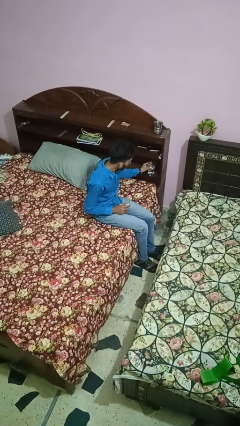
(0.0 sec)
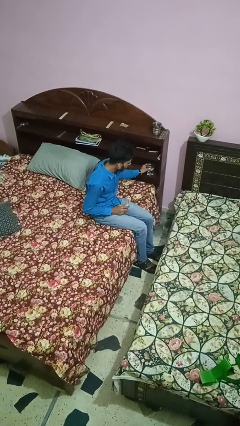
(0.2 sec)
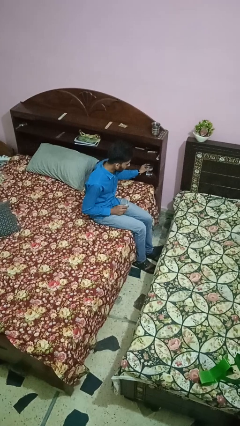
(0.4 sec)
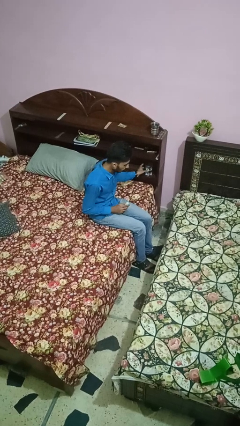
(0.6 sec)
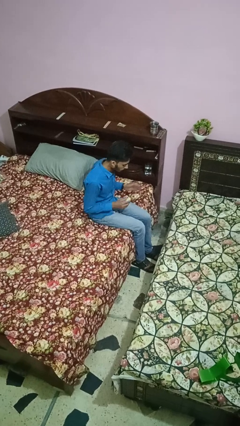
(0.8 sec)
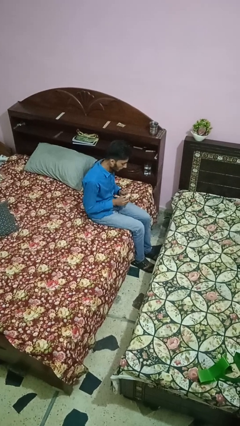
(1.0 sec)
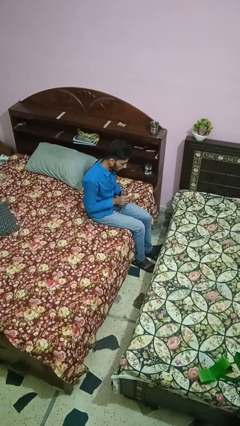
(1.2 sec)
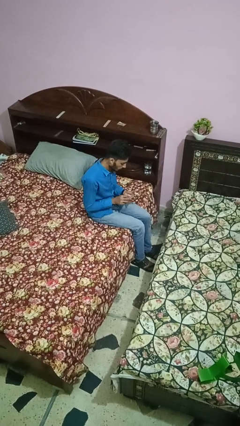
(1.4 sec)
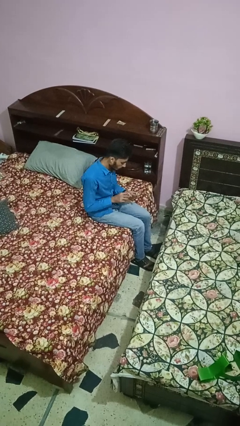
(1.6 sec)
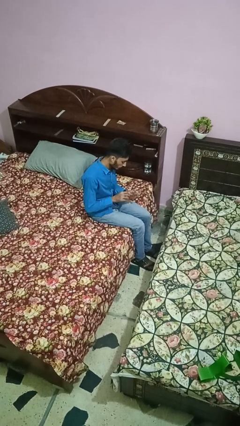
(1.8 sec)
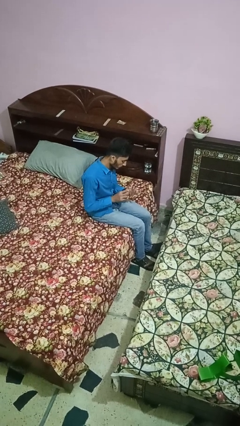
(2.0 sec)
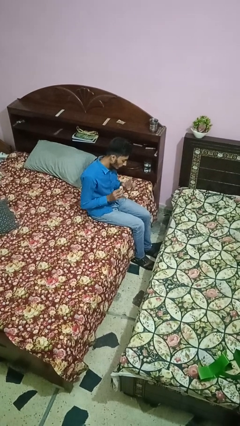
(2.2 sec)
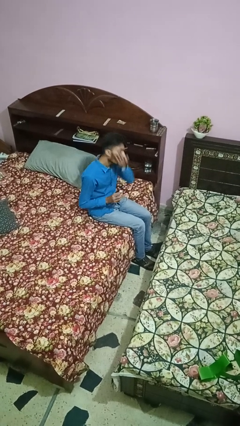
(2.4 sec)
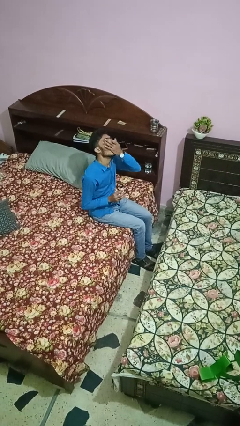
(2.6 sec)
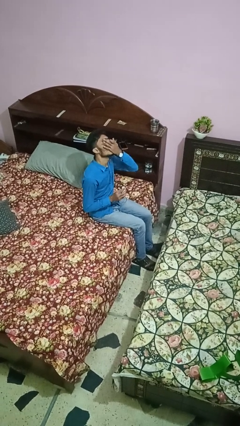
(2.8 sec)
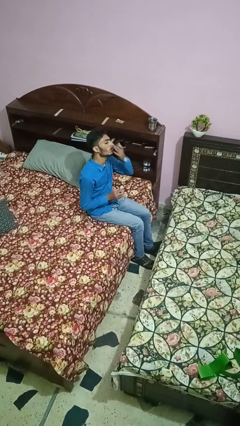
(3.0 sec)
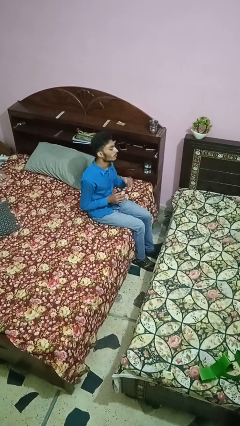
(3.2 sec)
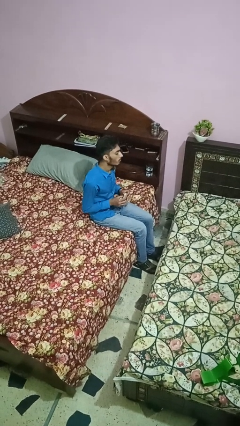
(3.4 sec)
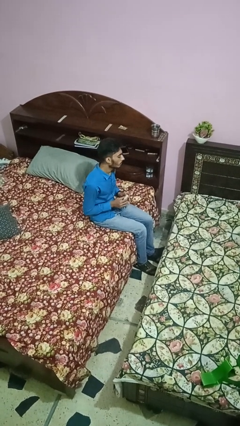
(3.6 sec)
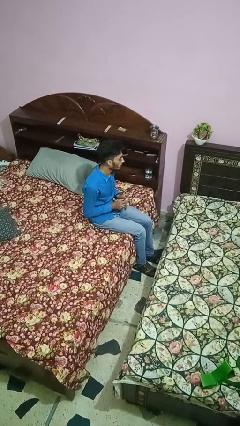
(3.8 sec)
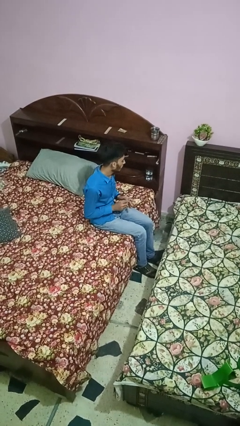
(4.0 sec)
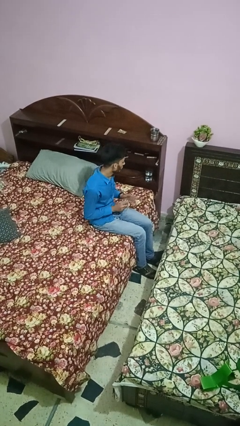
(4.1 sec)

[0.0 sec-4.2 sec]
person takes medicine pills

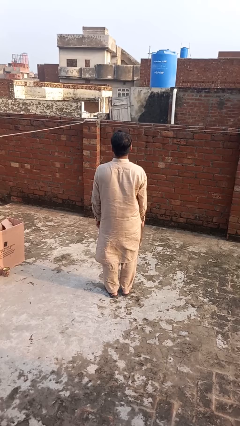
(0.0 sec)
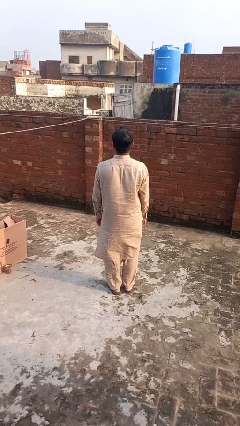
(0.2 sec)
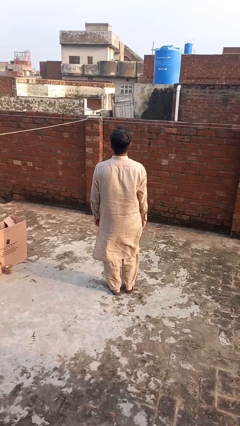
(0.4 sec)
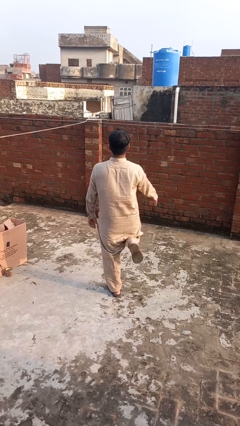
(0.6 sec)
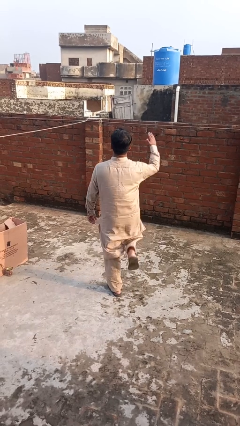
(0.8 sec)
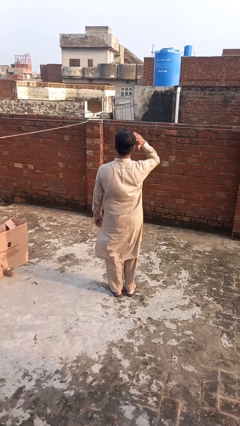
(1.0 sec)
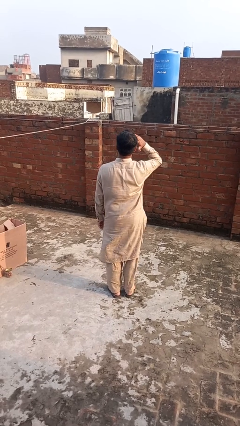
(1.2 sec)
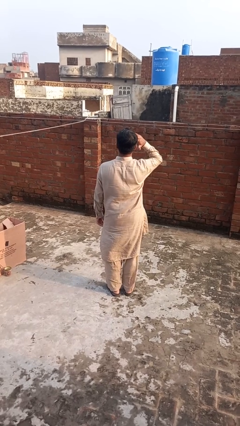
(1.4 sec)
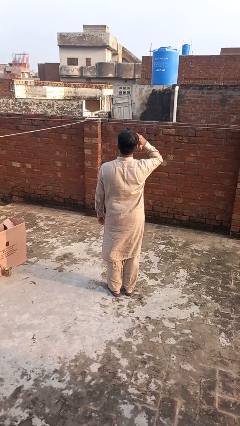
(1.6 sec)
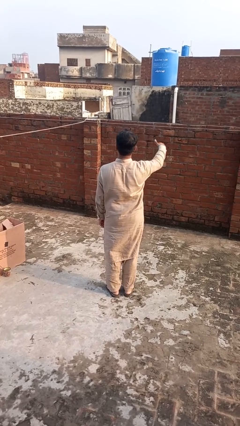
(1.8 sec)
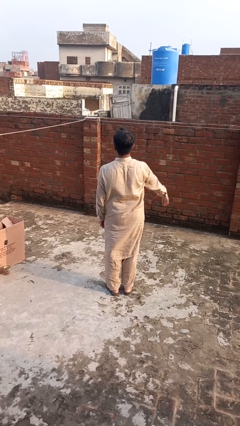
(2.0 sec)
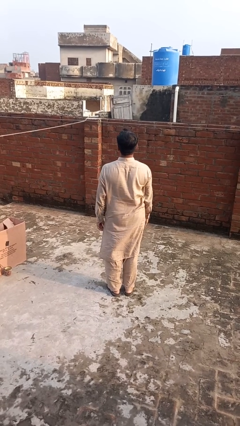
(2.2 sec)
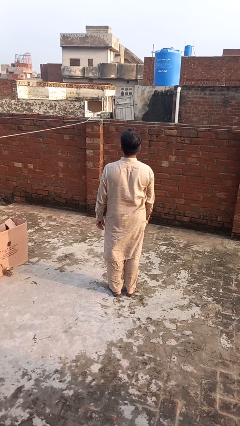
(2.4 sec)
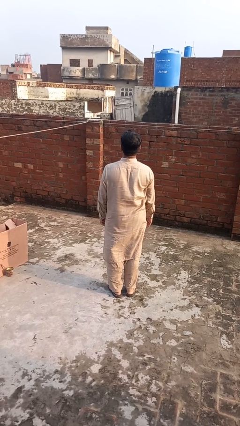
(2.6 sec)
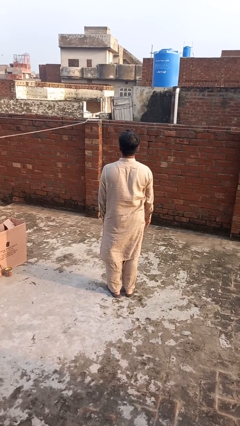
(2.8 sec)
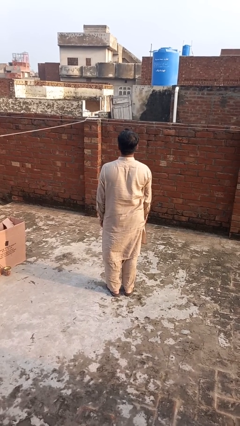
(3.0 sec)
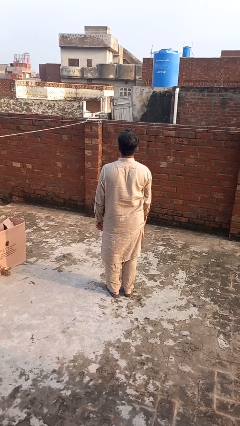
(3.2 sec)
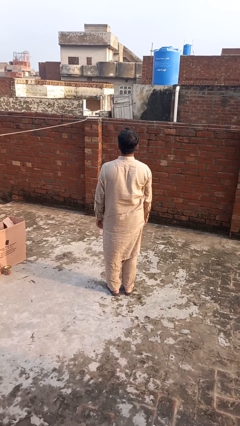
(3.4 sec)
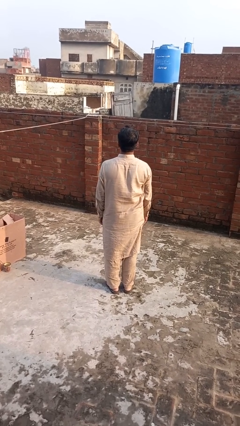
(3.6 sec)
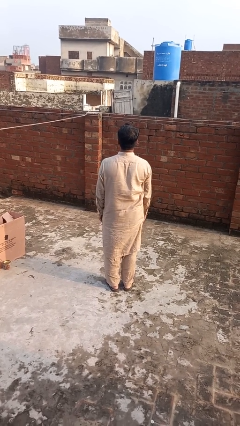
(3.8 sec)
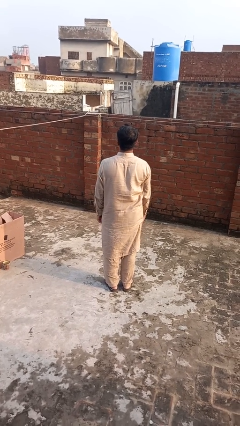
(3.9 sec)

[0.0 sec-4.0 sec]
person salutes

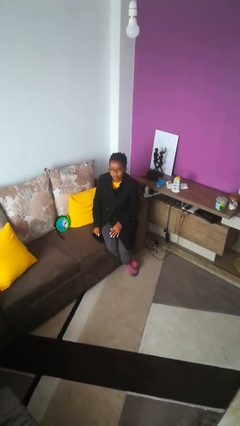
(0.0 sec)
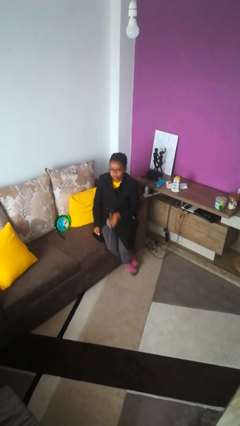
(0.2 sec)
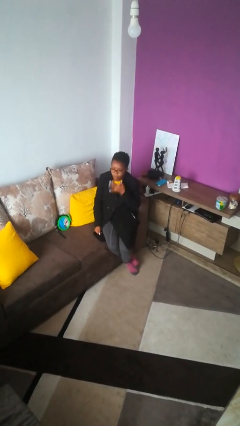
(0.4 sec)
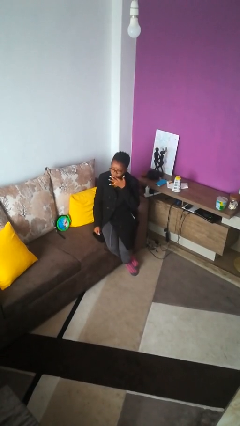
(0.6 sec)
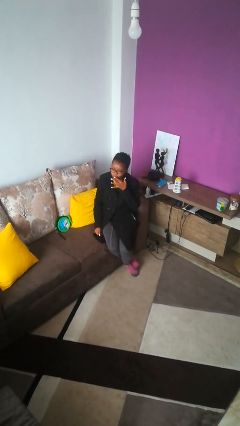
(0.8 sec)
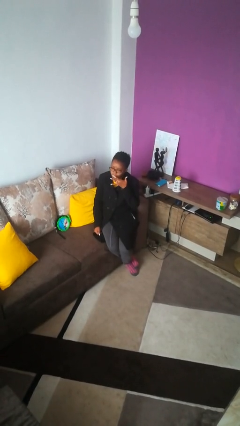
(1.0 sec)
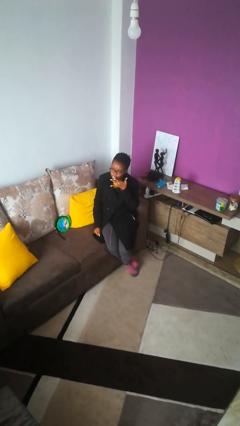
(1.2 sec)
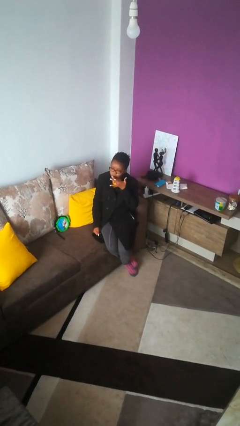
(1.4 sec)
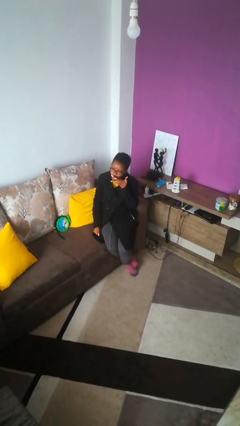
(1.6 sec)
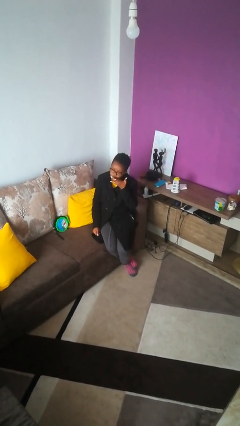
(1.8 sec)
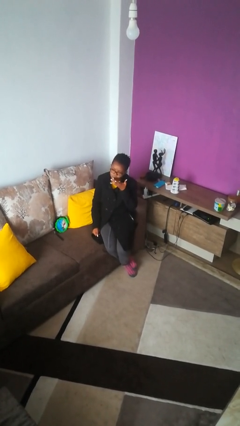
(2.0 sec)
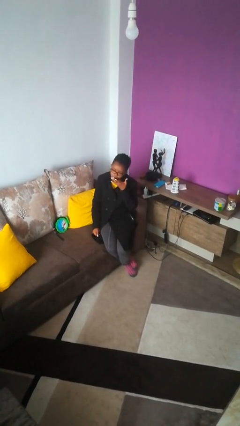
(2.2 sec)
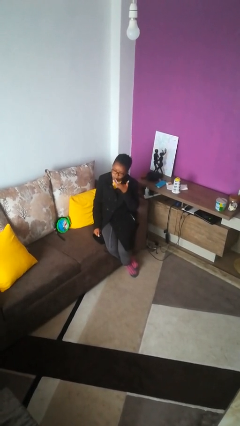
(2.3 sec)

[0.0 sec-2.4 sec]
person licks fingers

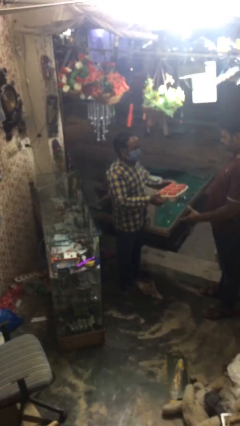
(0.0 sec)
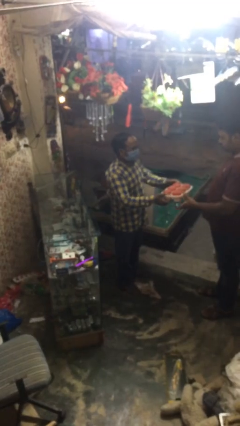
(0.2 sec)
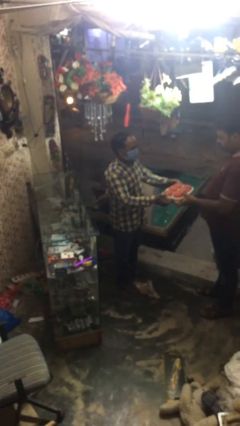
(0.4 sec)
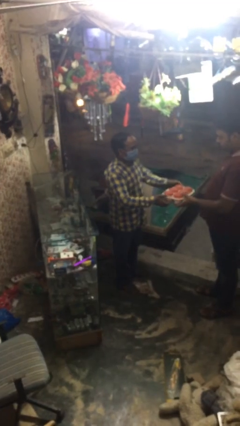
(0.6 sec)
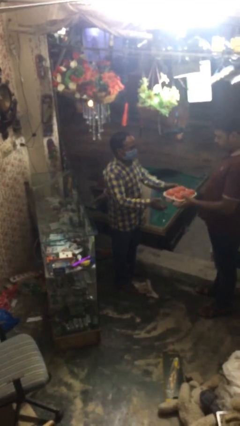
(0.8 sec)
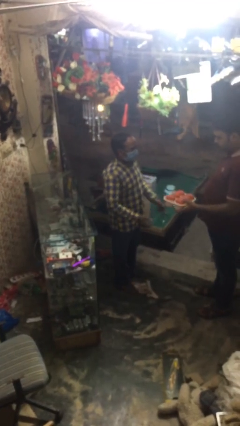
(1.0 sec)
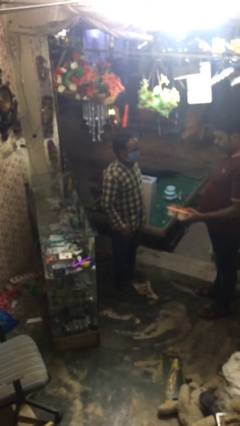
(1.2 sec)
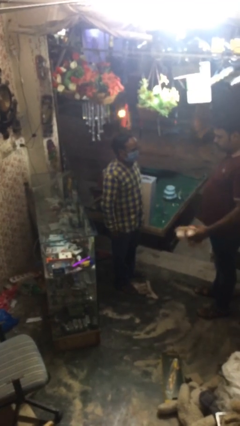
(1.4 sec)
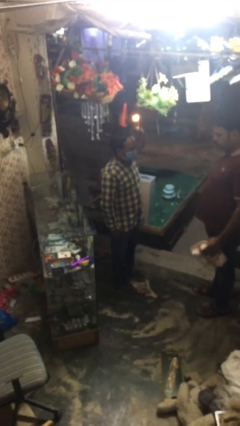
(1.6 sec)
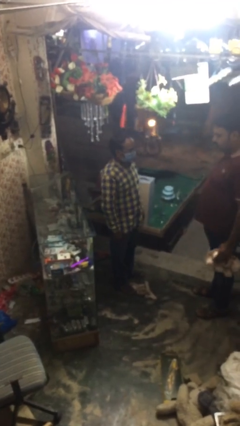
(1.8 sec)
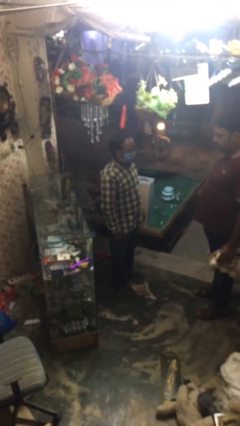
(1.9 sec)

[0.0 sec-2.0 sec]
person transfers object to person

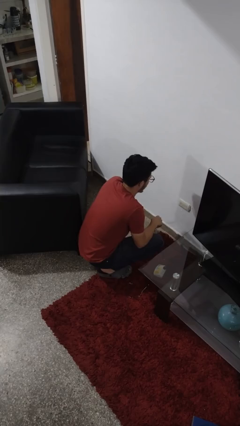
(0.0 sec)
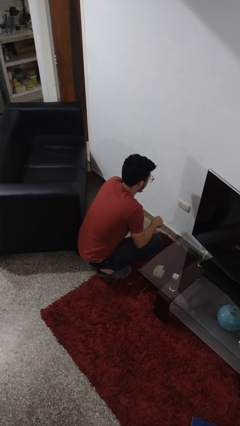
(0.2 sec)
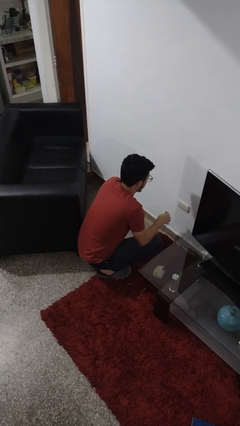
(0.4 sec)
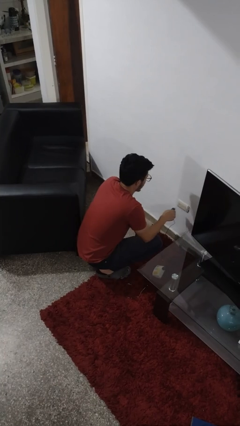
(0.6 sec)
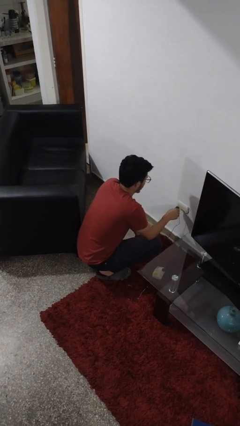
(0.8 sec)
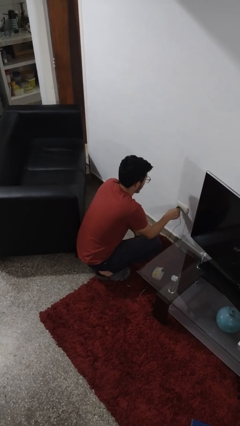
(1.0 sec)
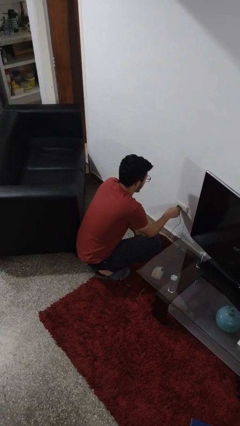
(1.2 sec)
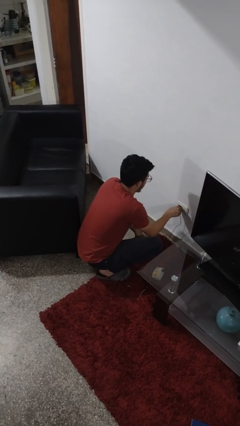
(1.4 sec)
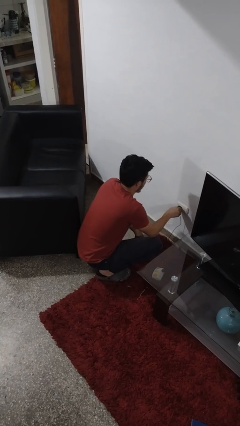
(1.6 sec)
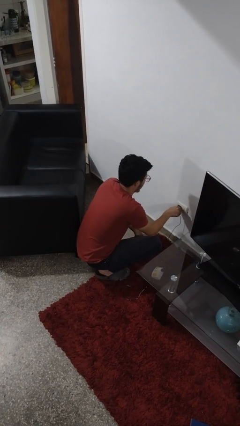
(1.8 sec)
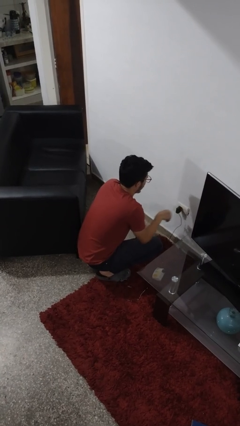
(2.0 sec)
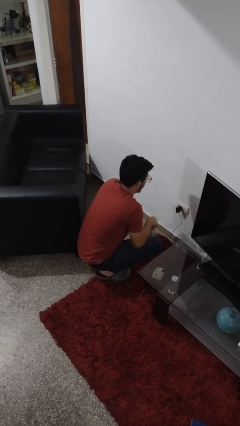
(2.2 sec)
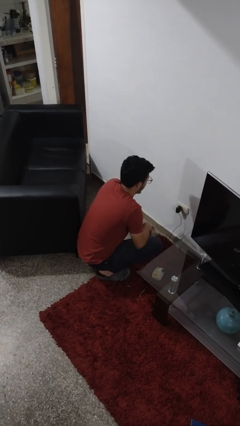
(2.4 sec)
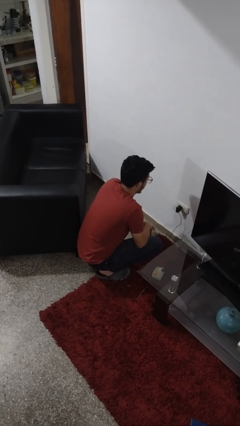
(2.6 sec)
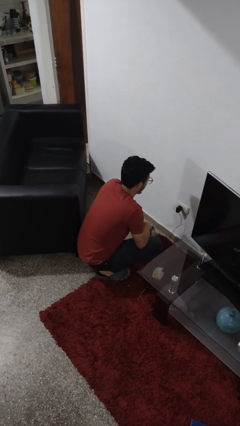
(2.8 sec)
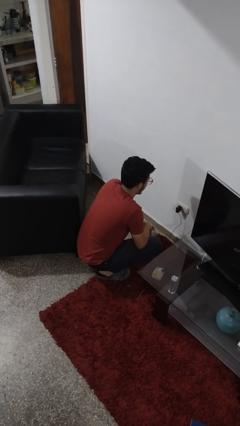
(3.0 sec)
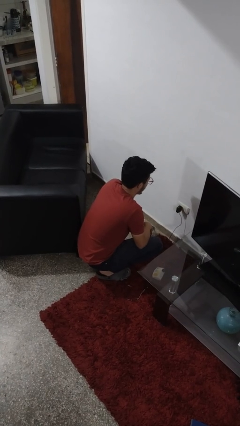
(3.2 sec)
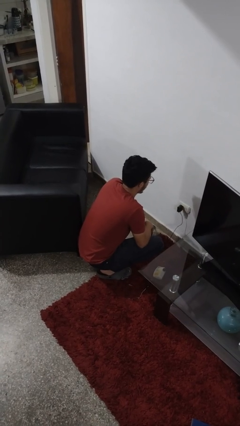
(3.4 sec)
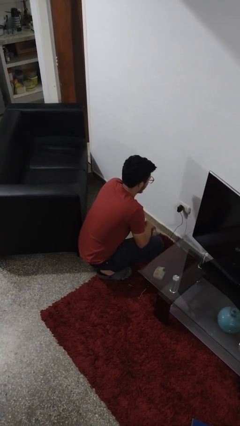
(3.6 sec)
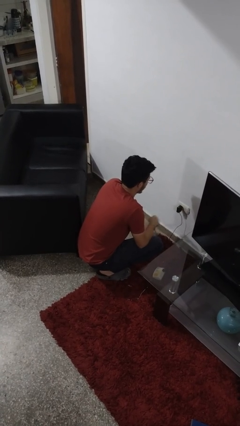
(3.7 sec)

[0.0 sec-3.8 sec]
person plugs into electrical socket

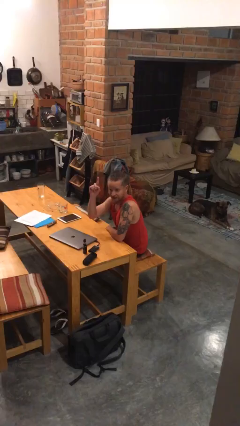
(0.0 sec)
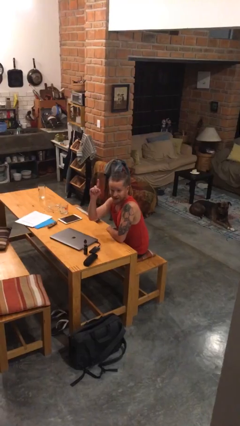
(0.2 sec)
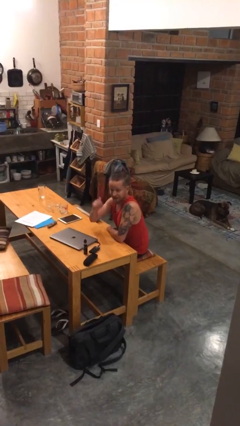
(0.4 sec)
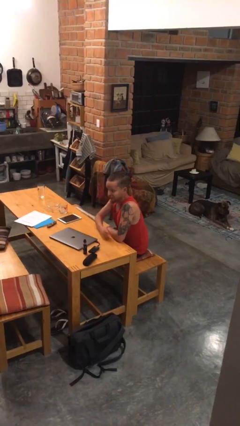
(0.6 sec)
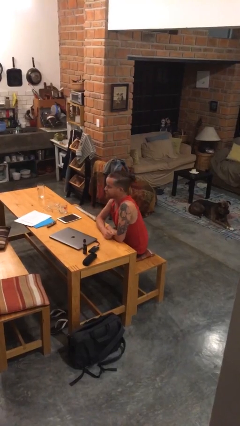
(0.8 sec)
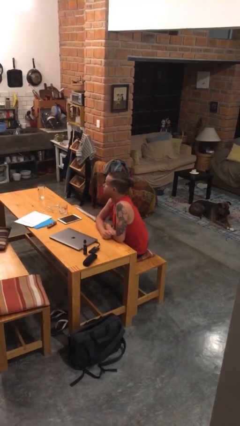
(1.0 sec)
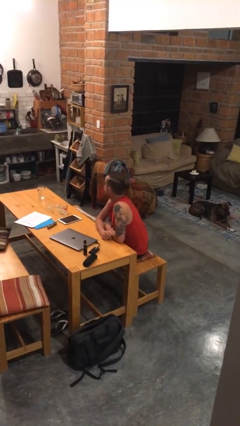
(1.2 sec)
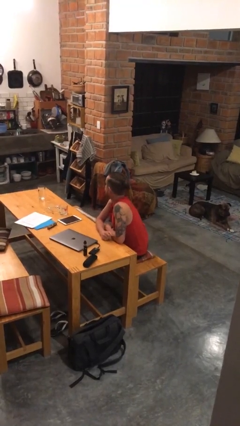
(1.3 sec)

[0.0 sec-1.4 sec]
person gestures lower hand
